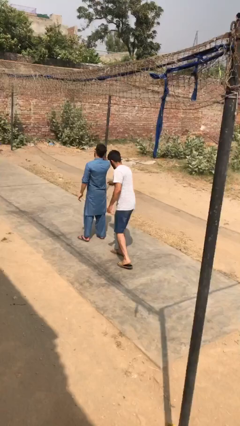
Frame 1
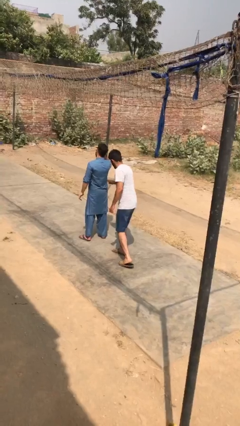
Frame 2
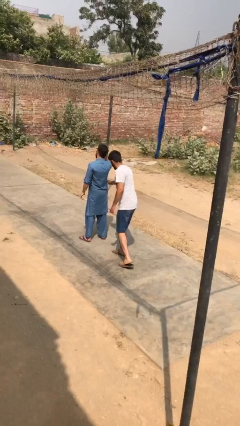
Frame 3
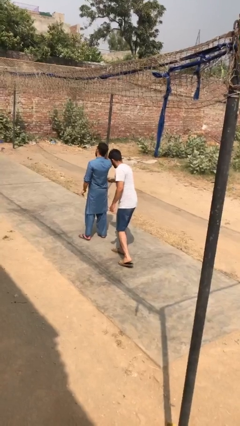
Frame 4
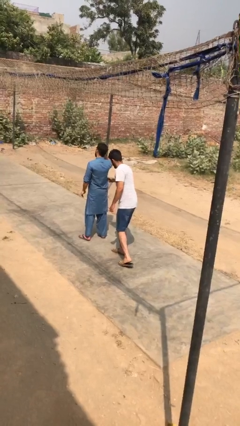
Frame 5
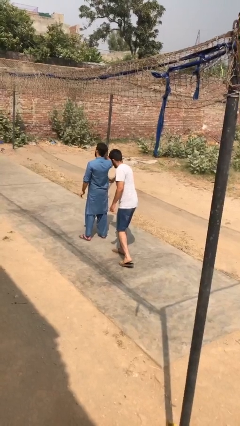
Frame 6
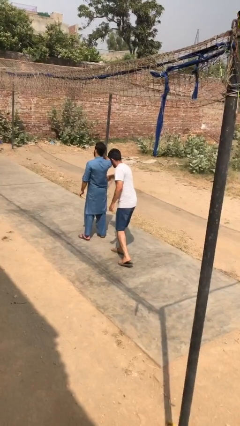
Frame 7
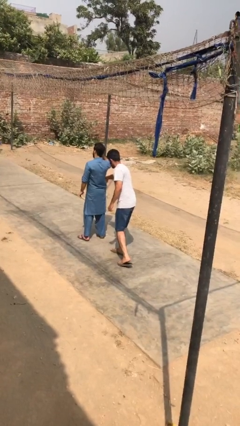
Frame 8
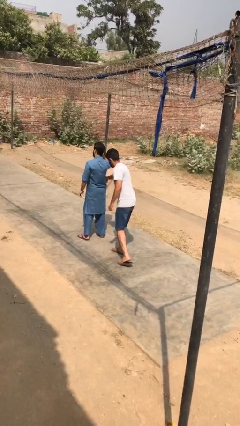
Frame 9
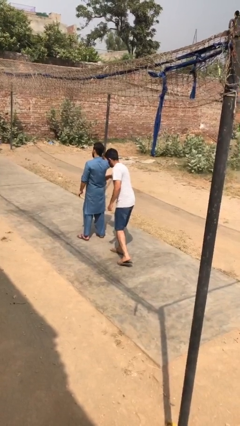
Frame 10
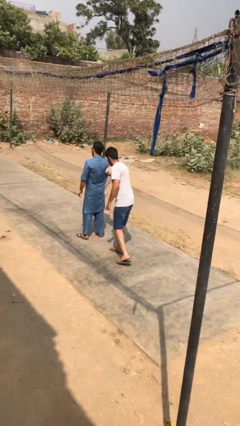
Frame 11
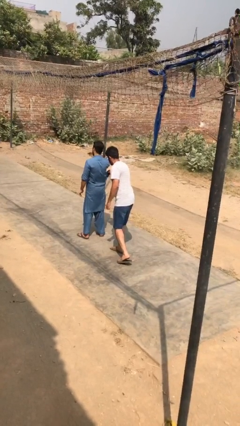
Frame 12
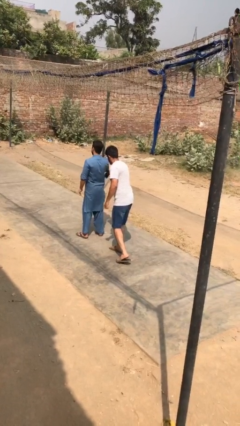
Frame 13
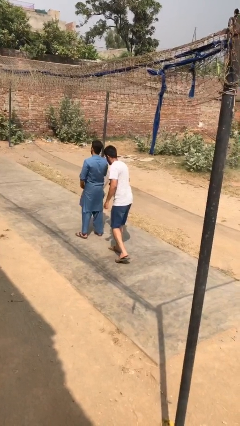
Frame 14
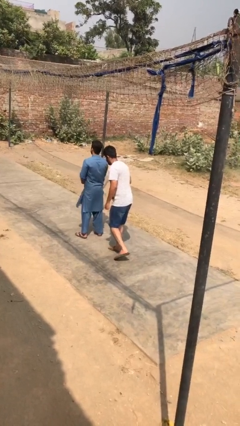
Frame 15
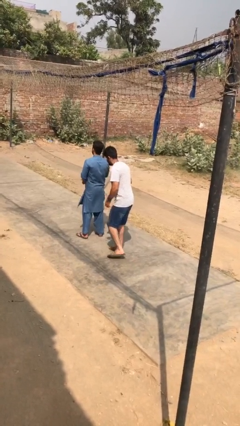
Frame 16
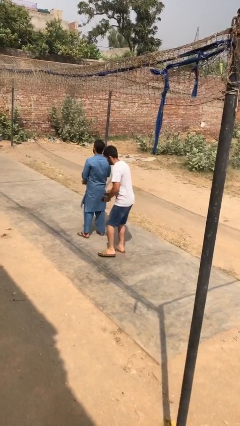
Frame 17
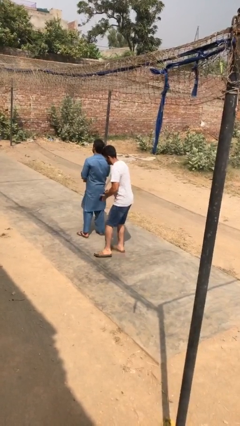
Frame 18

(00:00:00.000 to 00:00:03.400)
person steals object from person

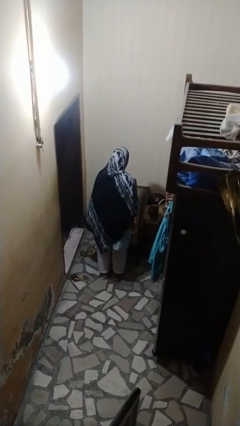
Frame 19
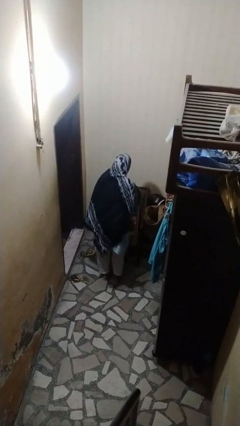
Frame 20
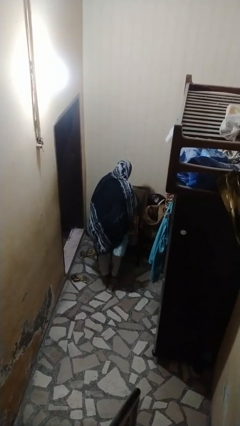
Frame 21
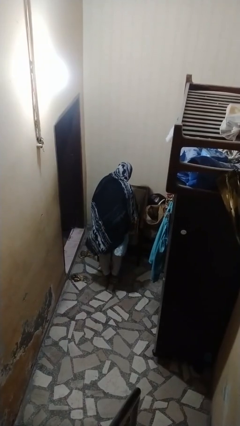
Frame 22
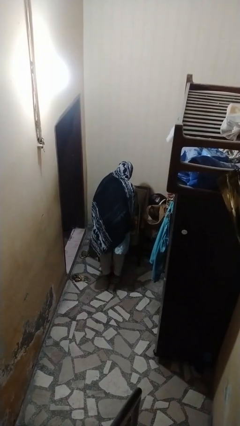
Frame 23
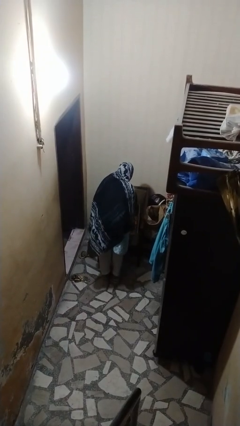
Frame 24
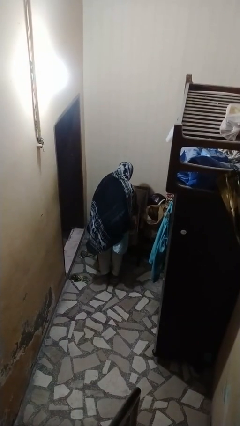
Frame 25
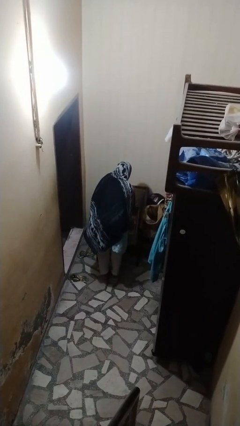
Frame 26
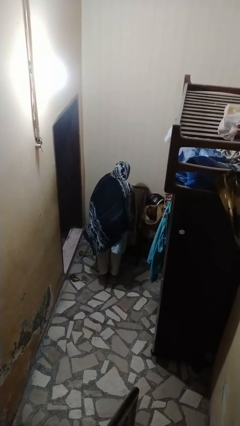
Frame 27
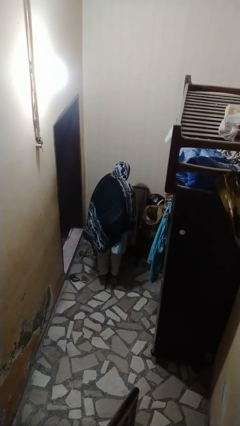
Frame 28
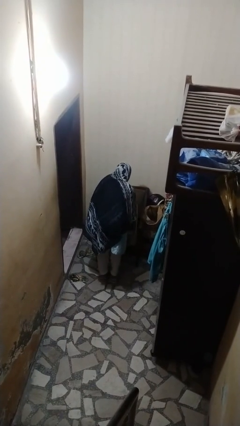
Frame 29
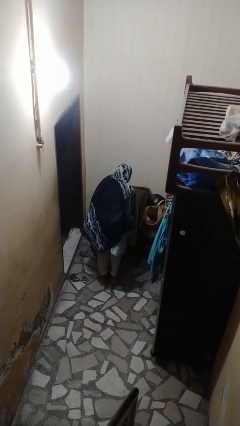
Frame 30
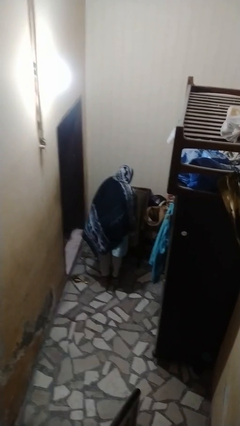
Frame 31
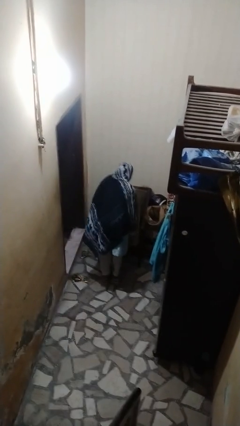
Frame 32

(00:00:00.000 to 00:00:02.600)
person searches in box

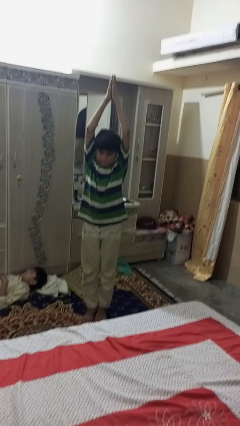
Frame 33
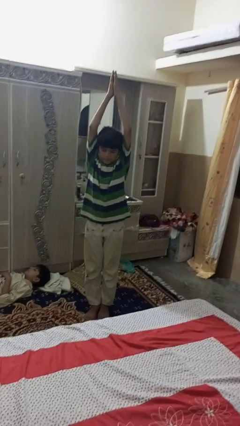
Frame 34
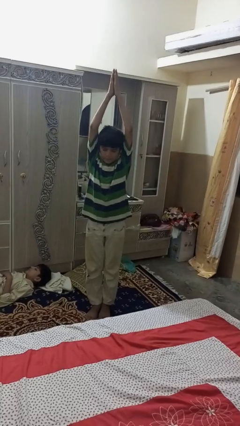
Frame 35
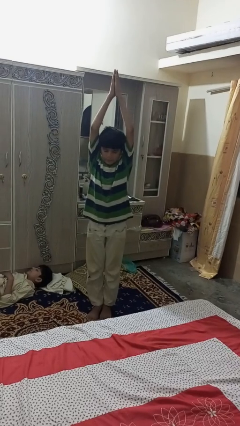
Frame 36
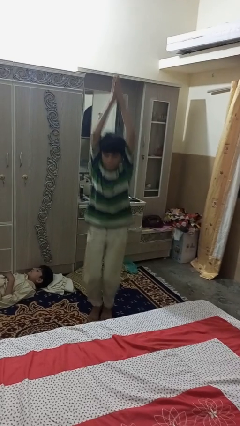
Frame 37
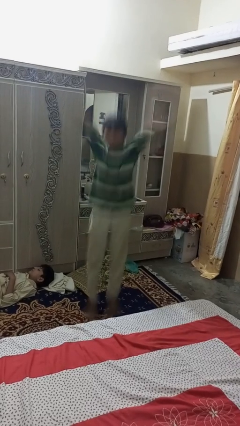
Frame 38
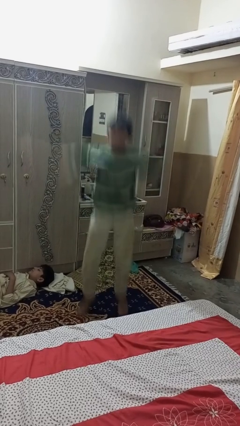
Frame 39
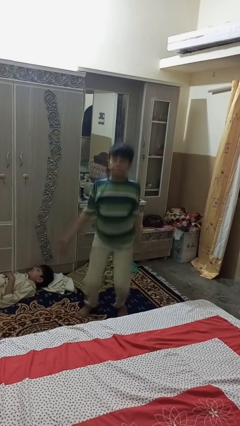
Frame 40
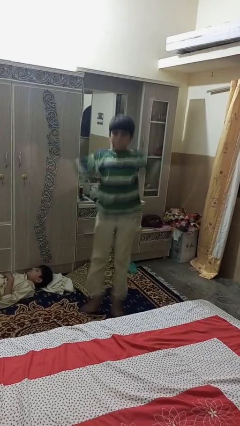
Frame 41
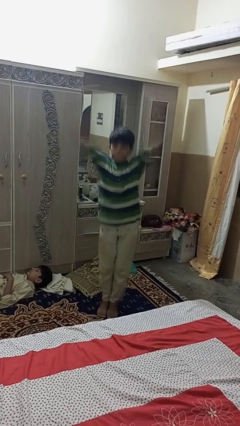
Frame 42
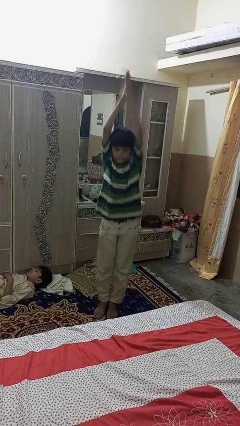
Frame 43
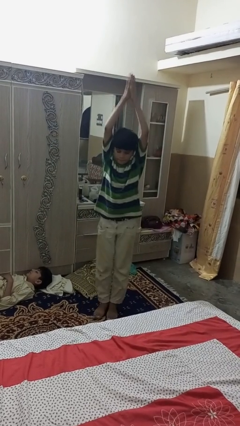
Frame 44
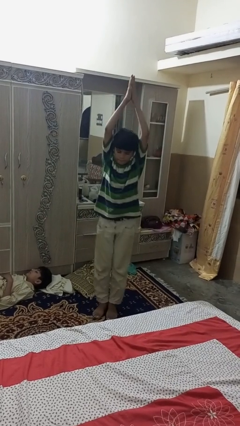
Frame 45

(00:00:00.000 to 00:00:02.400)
person exercises with jumping jacks

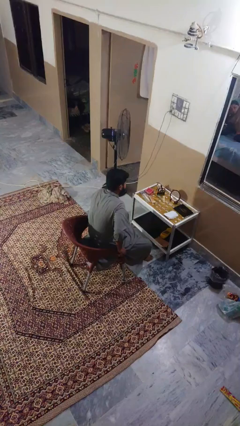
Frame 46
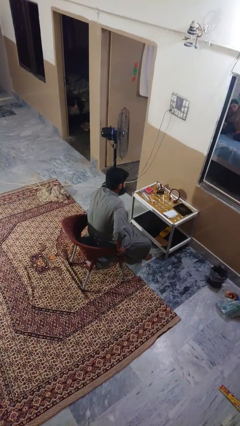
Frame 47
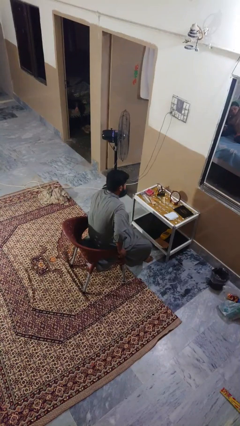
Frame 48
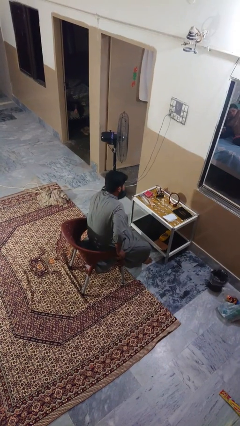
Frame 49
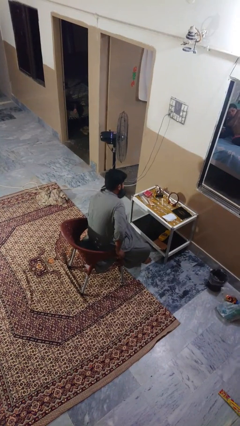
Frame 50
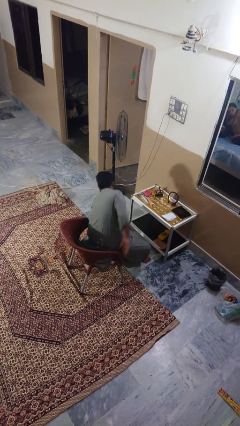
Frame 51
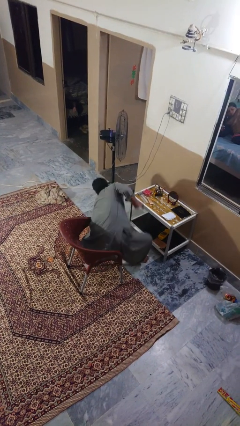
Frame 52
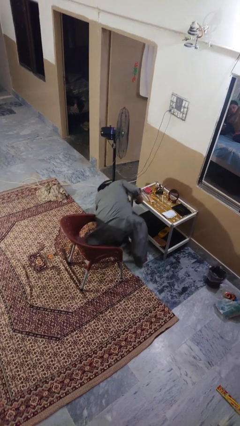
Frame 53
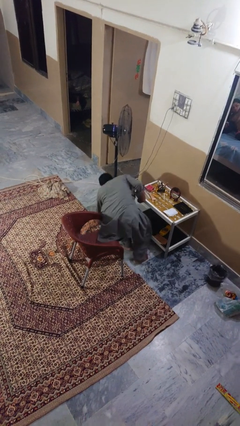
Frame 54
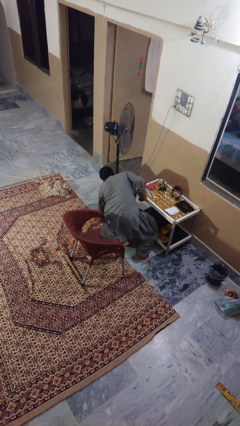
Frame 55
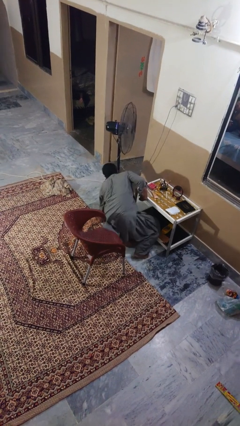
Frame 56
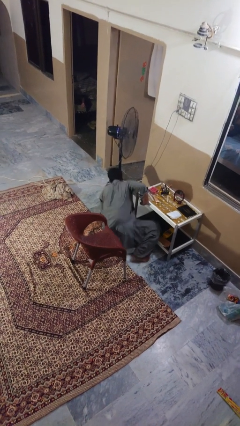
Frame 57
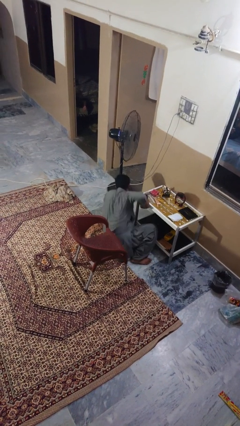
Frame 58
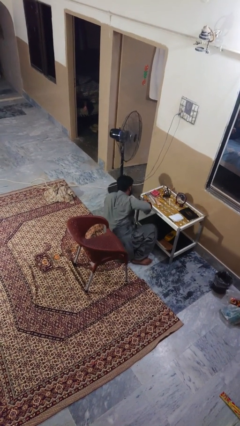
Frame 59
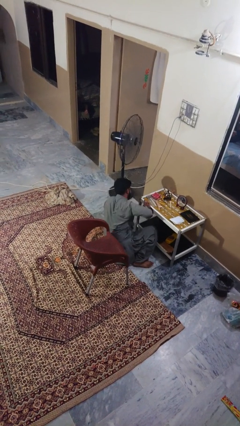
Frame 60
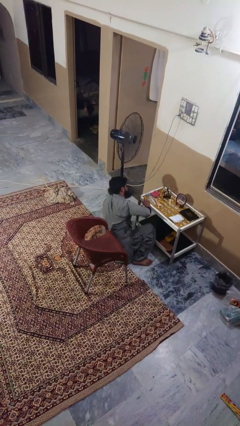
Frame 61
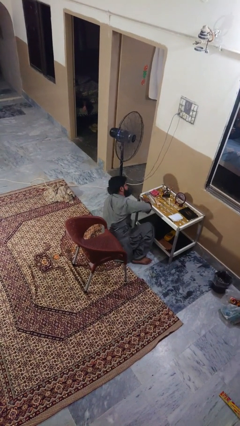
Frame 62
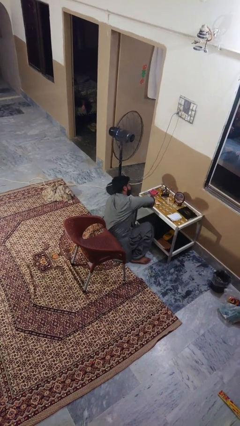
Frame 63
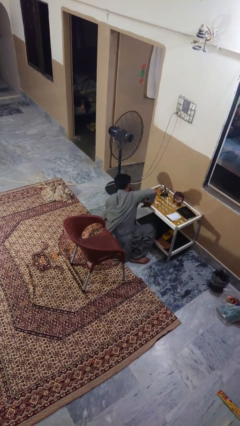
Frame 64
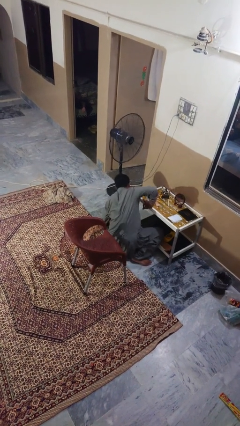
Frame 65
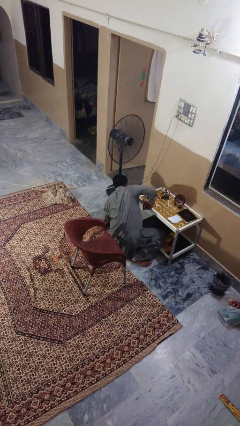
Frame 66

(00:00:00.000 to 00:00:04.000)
person falls from chair

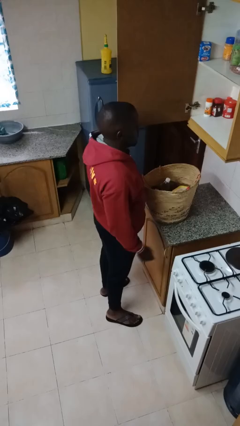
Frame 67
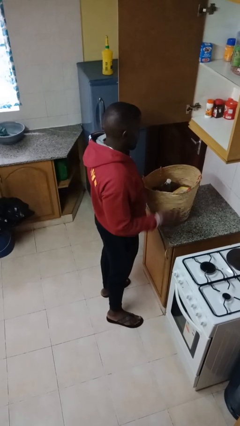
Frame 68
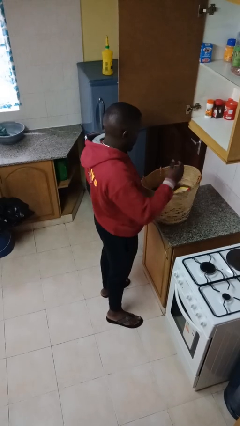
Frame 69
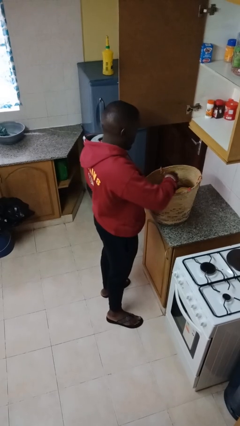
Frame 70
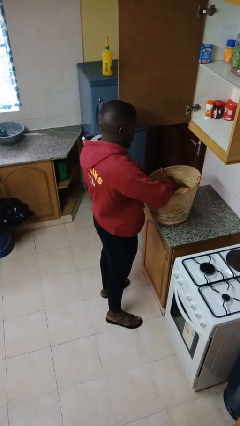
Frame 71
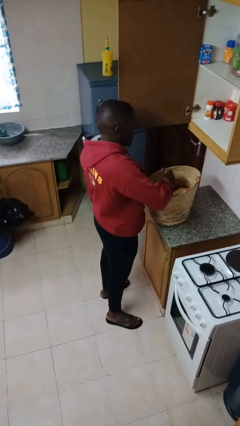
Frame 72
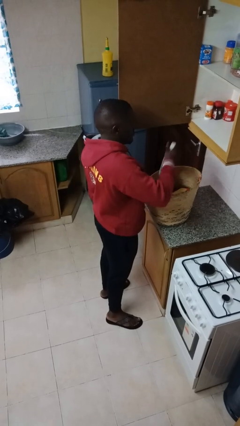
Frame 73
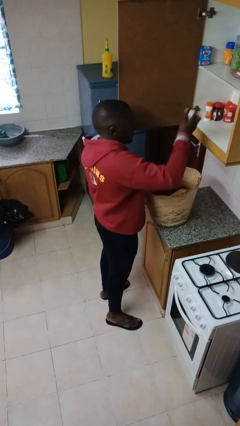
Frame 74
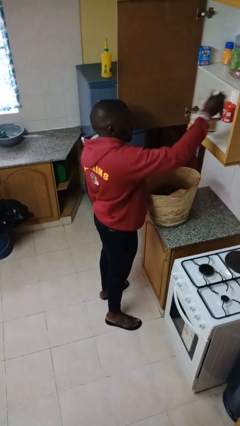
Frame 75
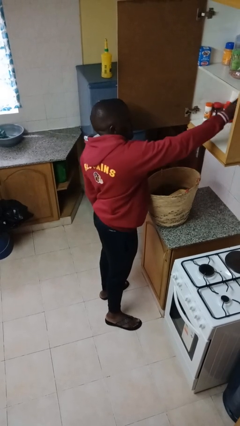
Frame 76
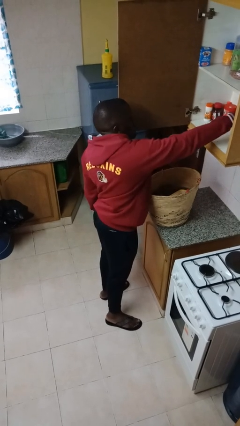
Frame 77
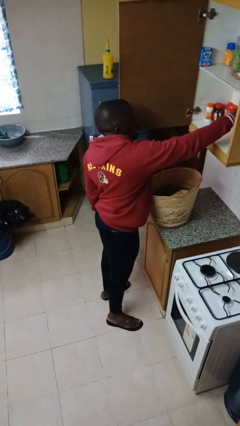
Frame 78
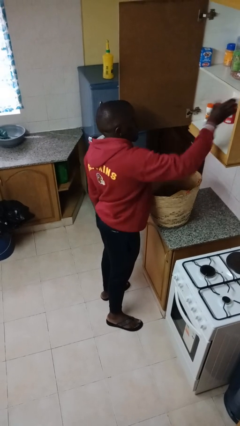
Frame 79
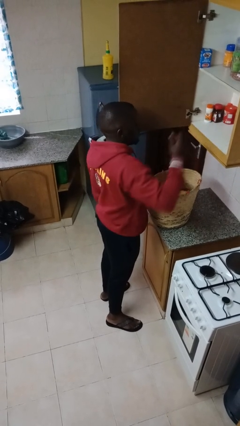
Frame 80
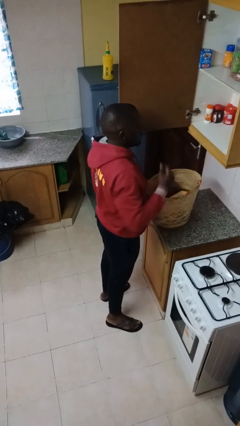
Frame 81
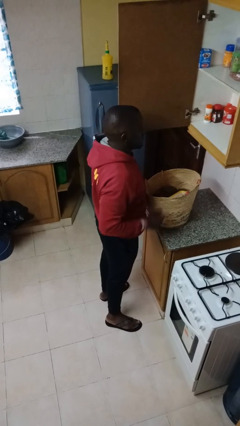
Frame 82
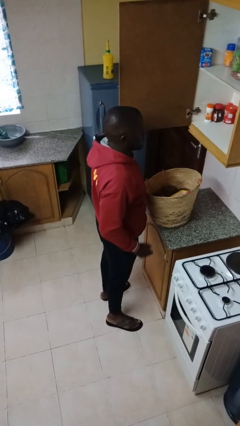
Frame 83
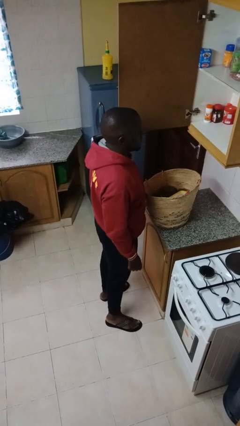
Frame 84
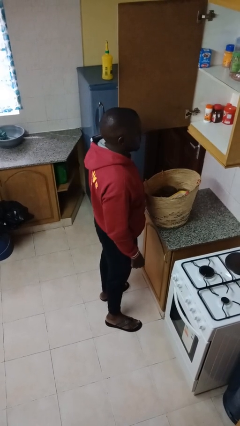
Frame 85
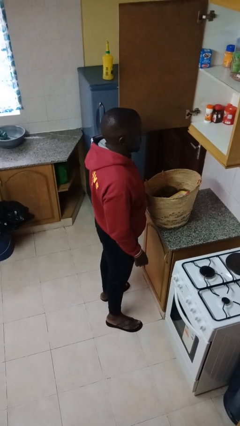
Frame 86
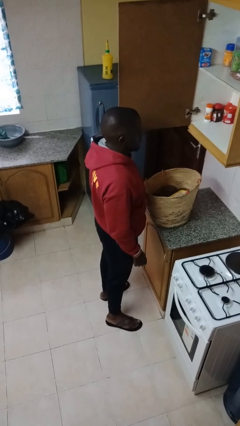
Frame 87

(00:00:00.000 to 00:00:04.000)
person loads groceries into cabinet

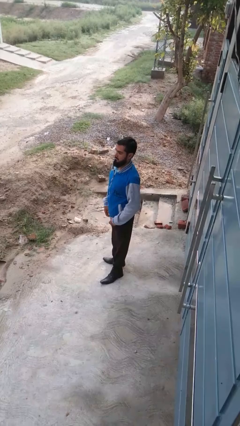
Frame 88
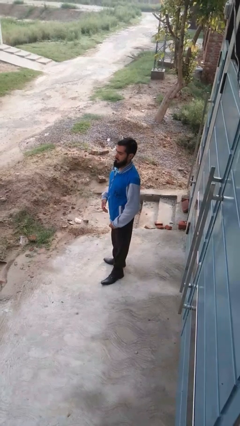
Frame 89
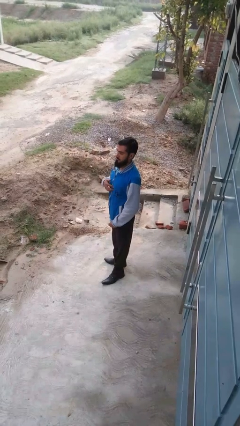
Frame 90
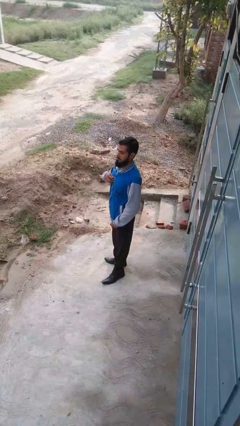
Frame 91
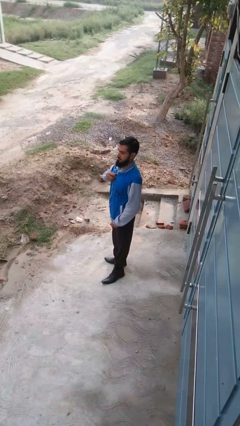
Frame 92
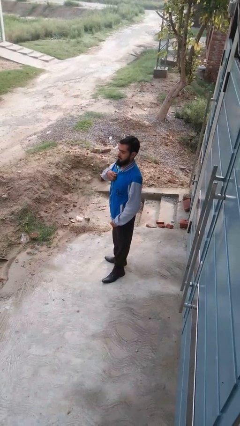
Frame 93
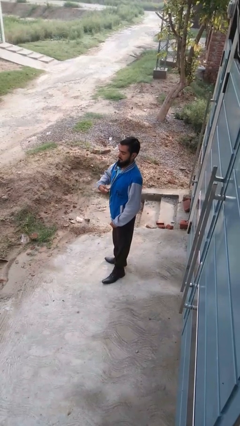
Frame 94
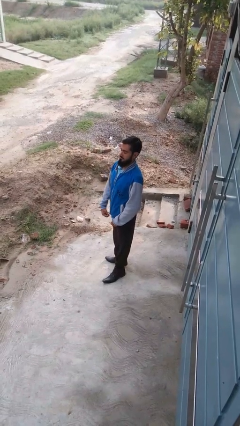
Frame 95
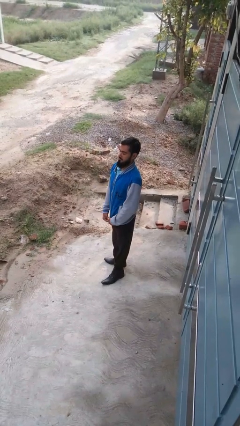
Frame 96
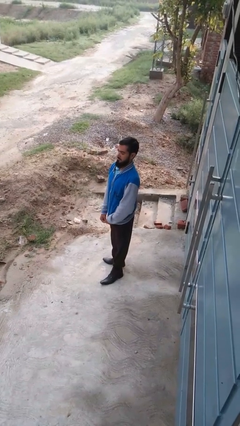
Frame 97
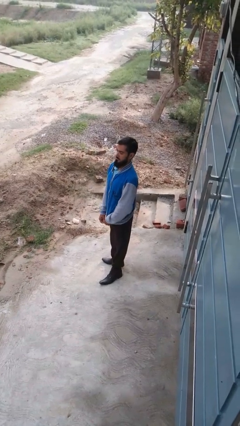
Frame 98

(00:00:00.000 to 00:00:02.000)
person unzips jacket
